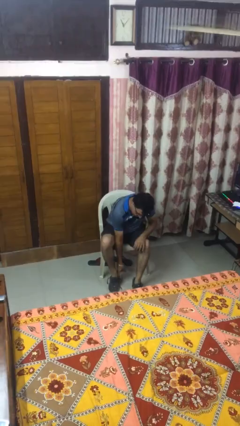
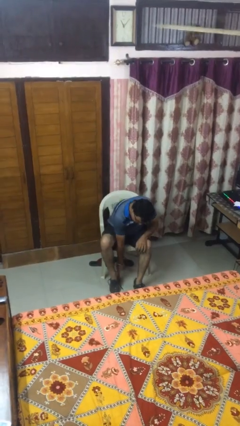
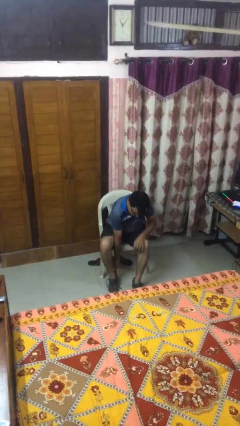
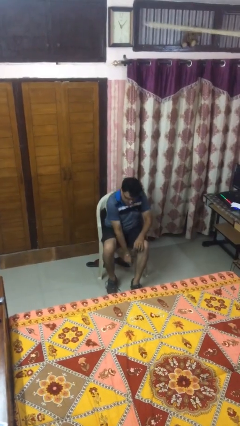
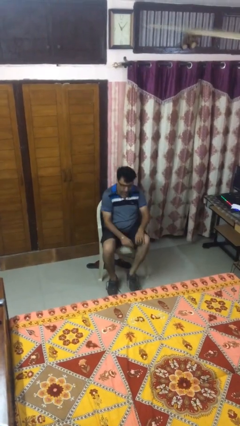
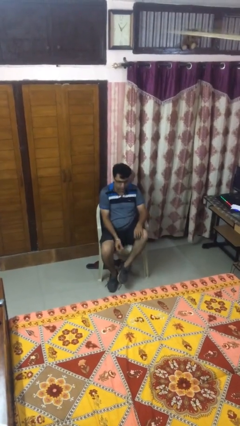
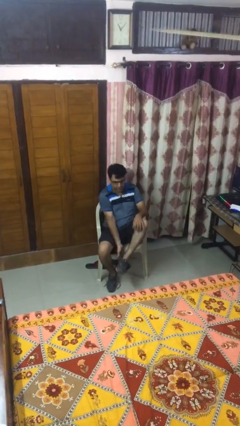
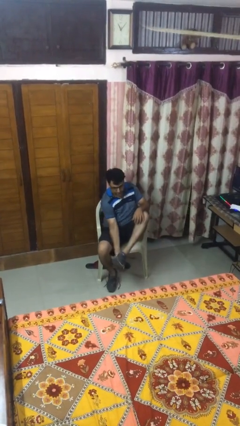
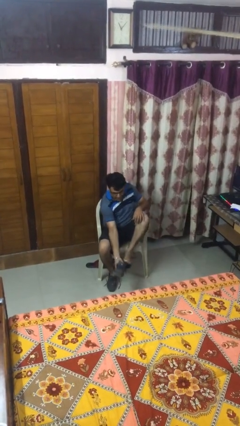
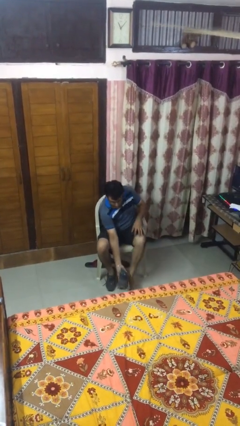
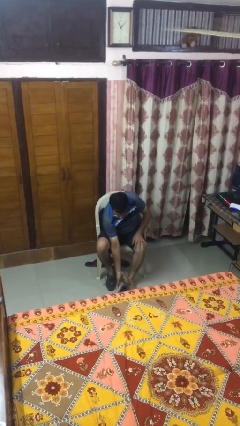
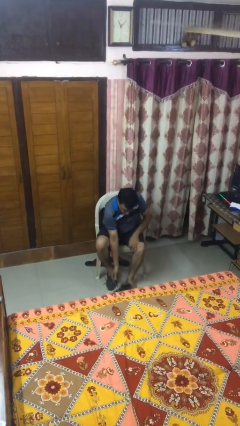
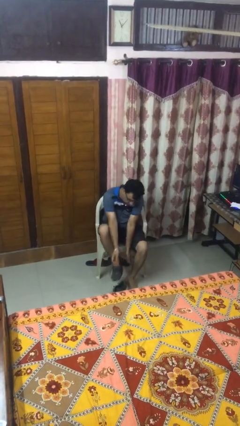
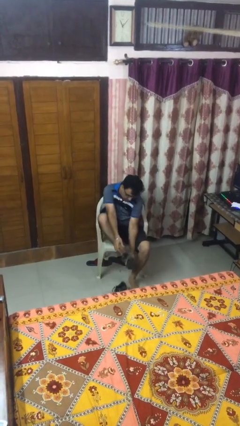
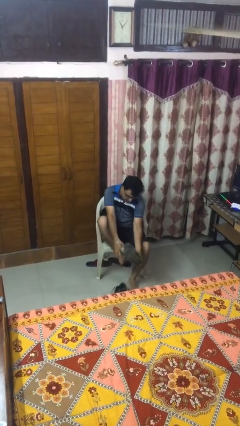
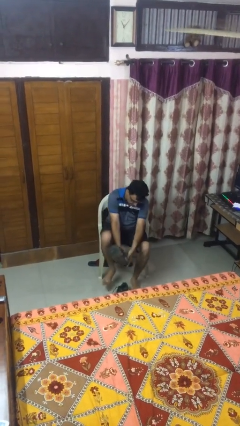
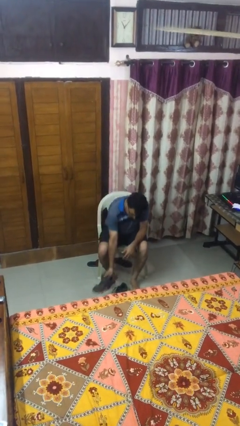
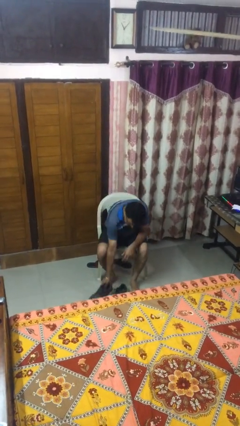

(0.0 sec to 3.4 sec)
person takes off shoes

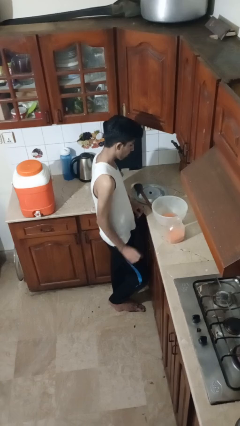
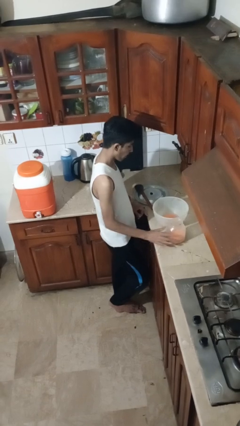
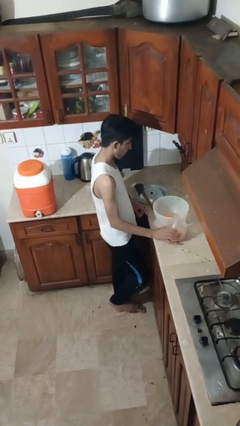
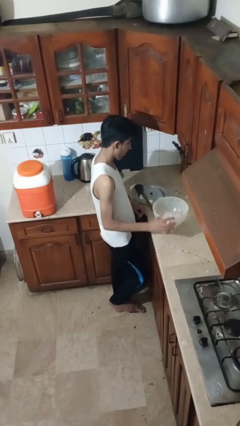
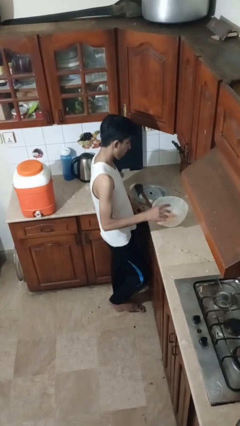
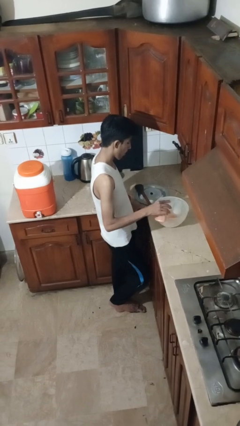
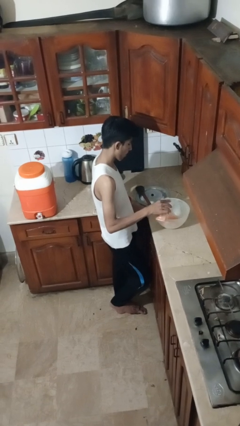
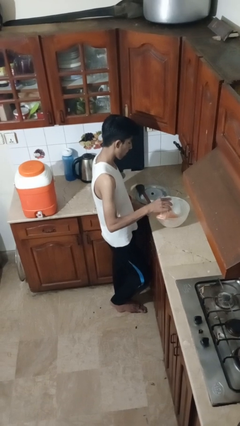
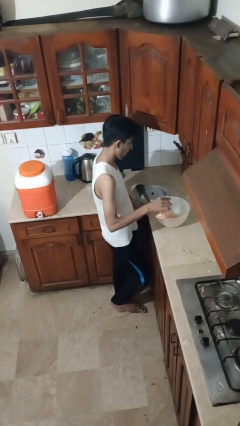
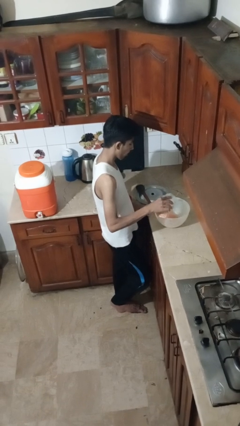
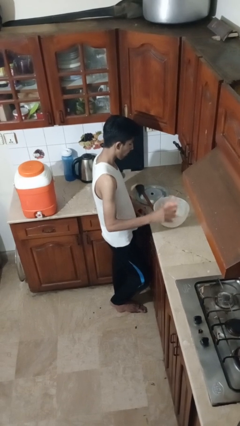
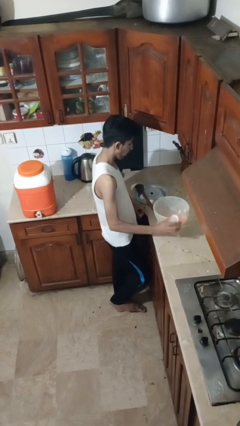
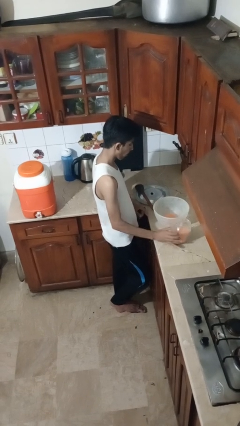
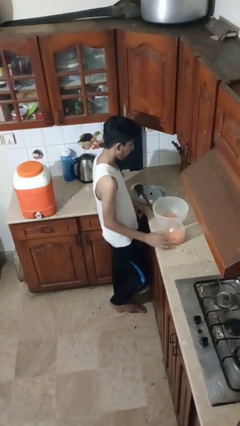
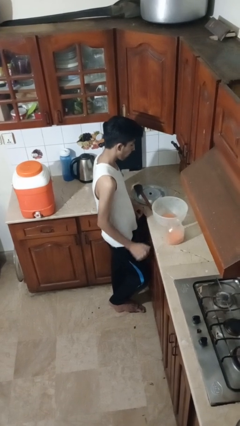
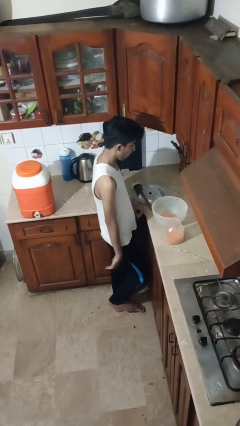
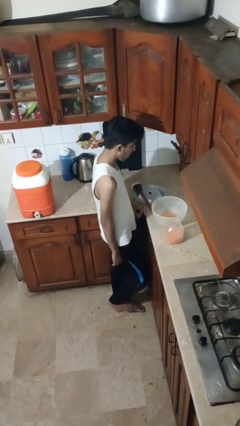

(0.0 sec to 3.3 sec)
person pours into bowl

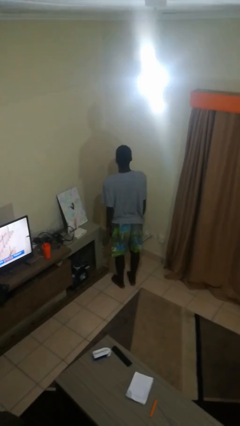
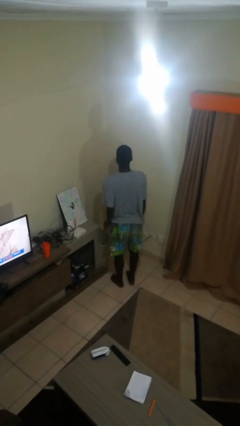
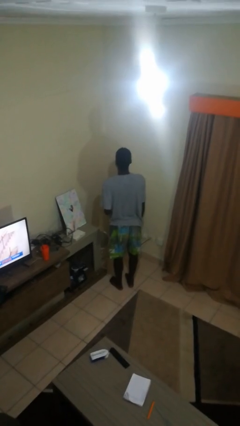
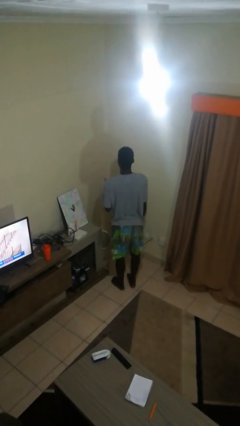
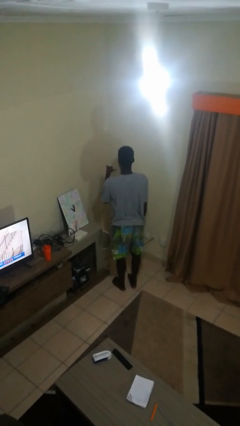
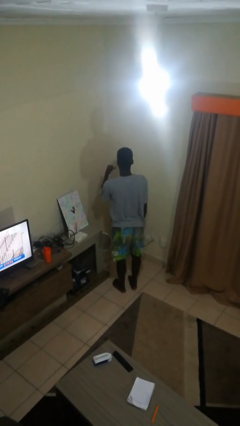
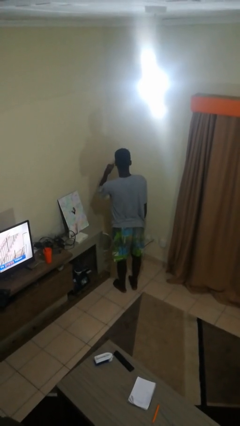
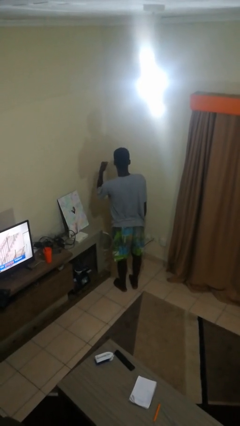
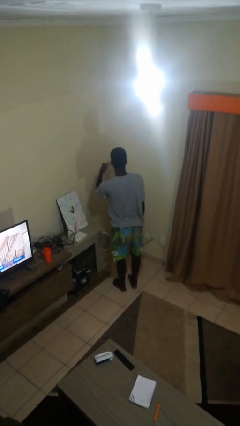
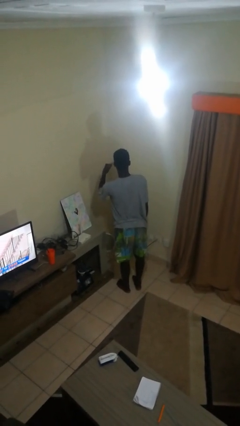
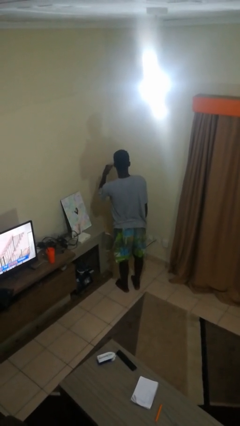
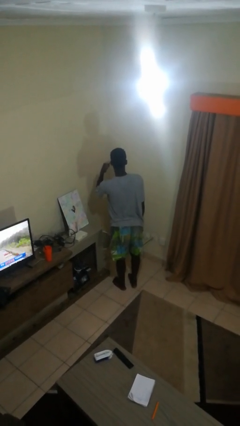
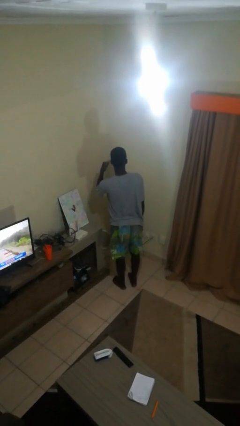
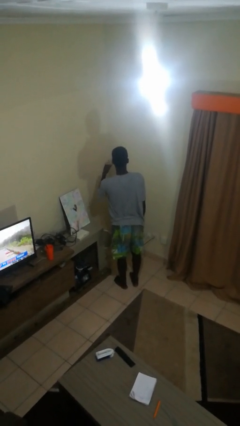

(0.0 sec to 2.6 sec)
person gestures call me

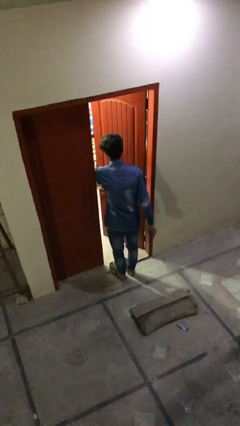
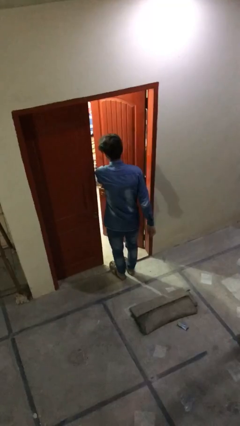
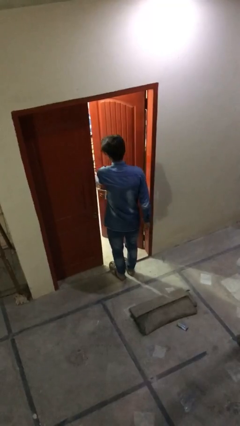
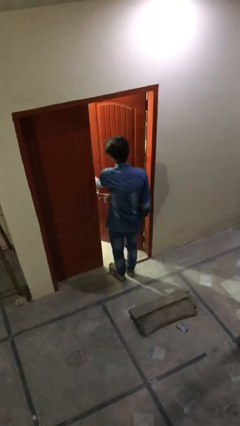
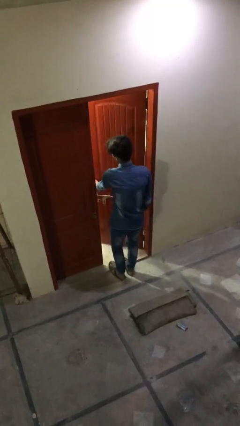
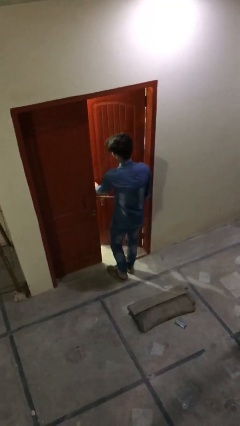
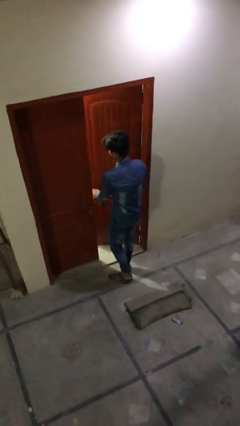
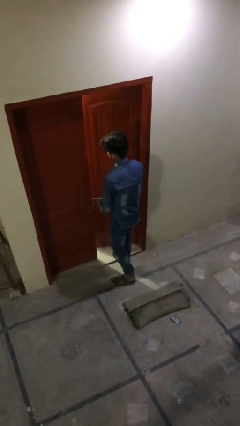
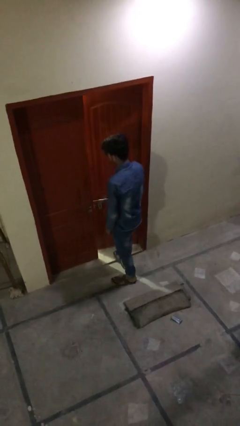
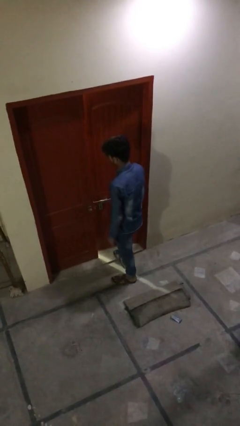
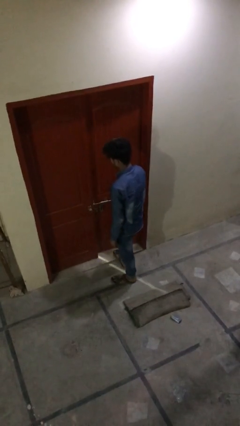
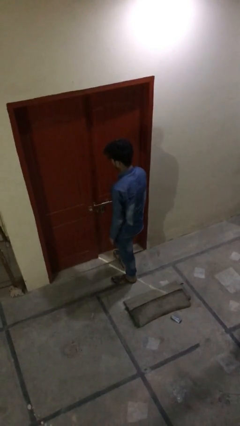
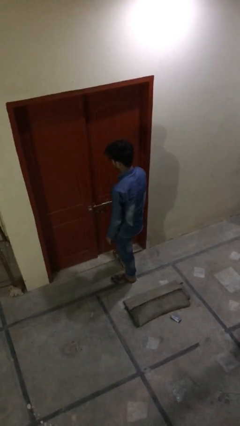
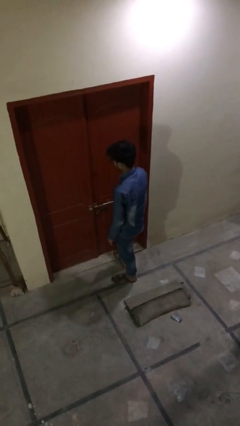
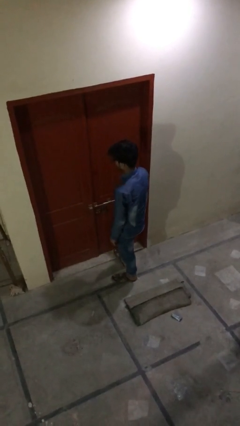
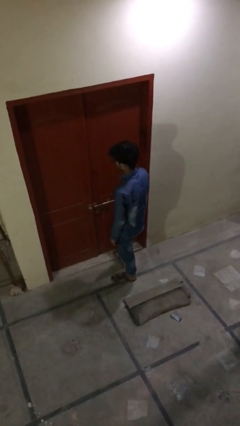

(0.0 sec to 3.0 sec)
person closes facility door

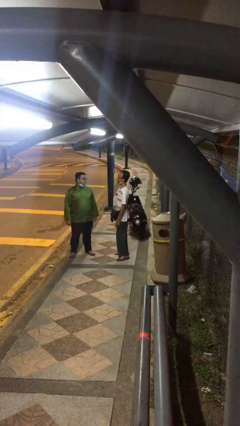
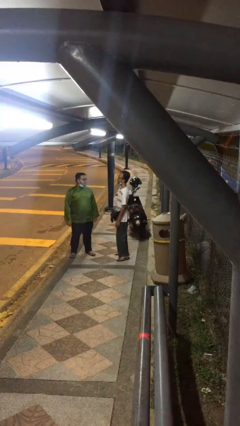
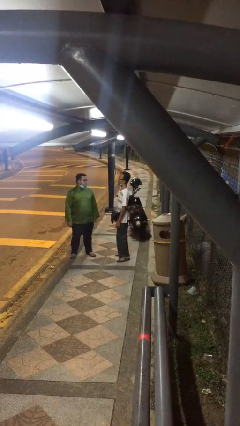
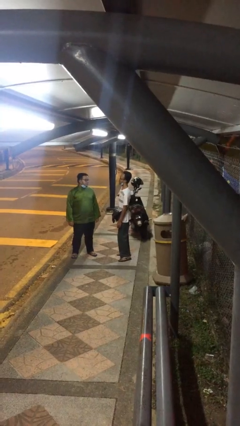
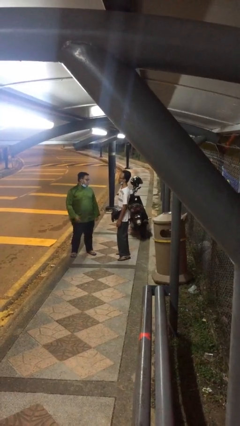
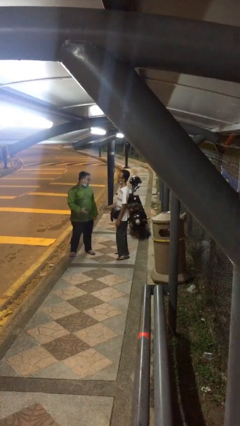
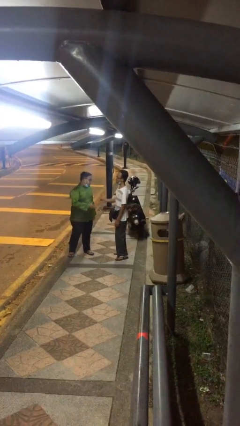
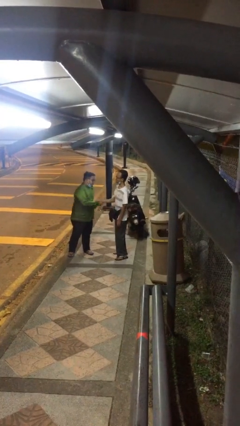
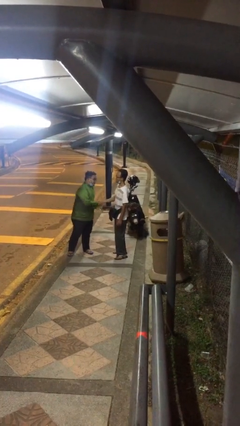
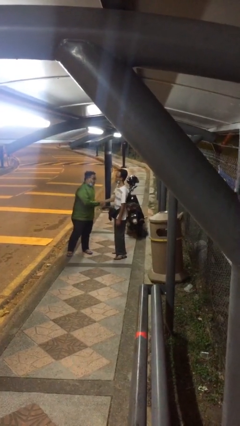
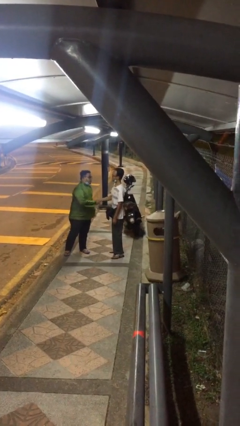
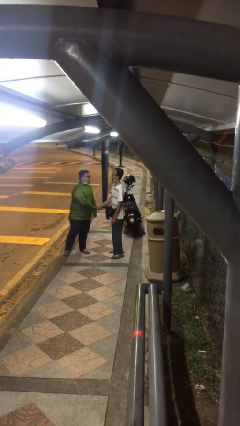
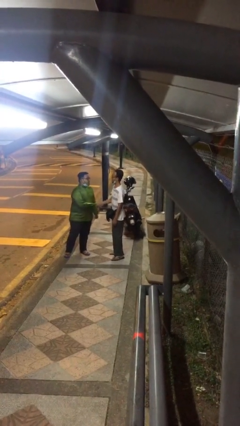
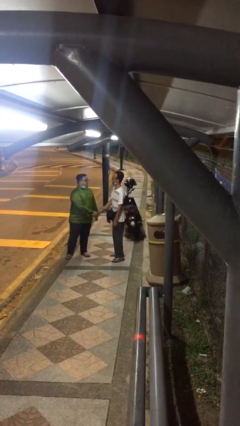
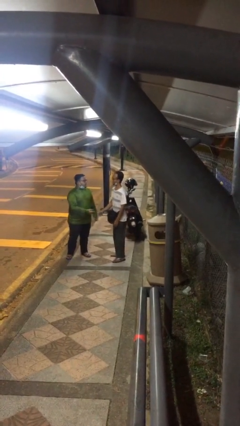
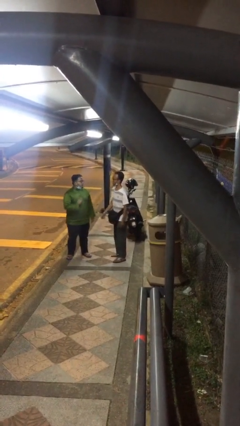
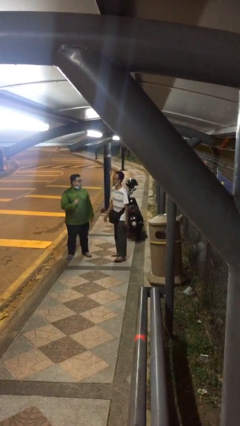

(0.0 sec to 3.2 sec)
person shakes hand

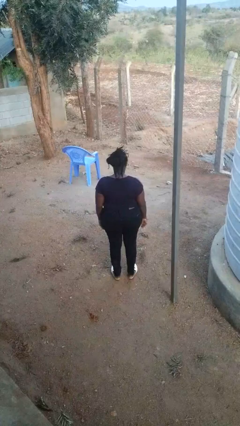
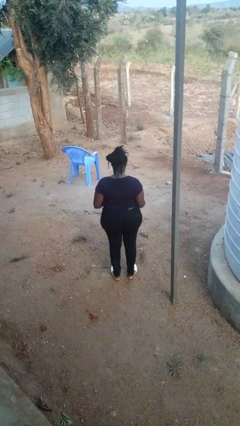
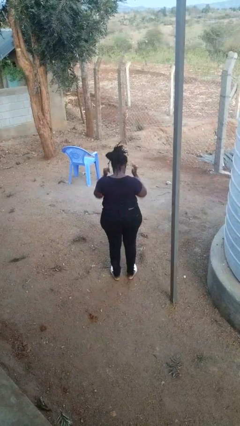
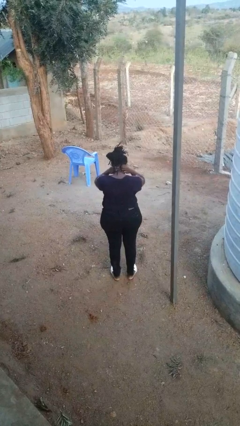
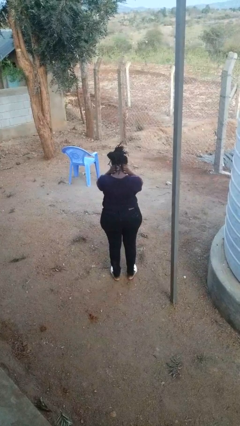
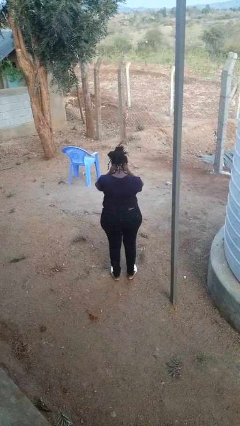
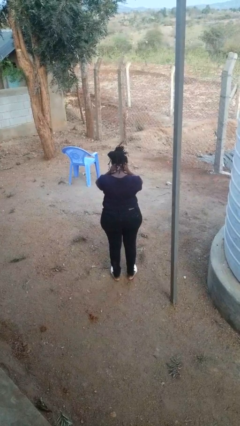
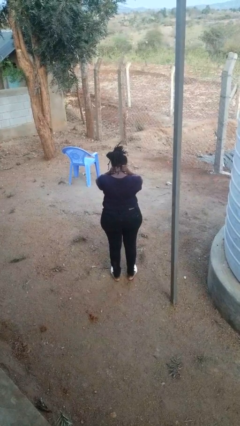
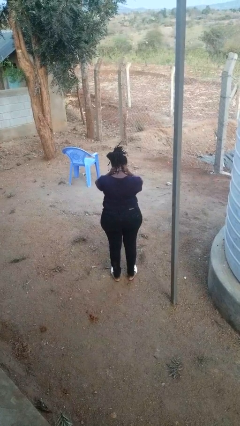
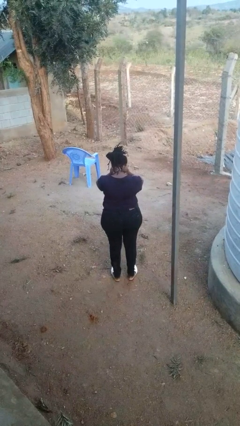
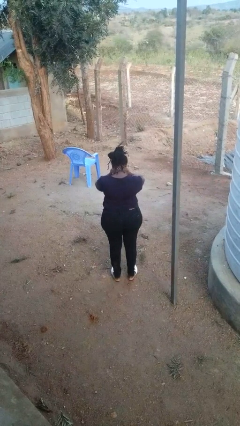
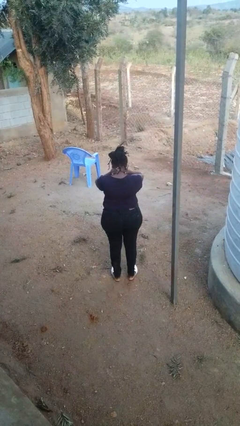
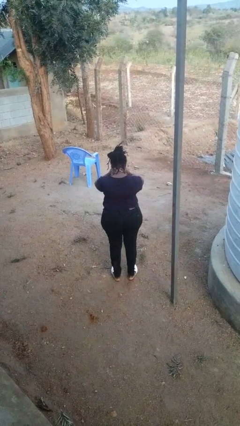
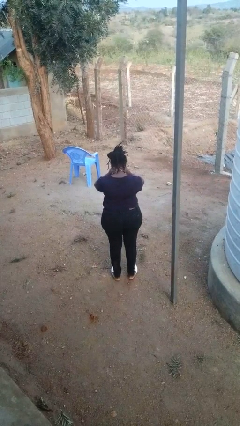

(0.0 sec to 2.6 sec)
person rubs neck
